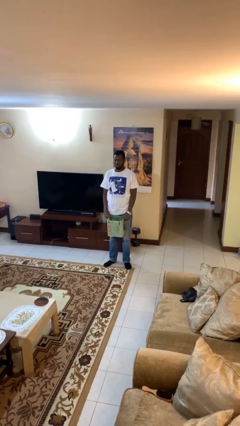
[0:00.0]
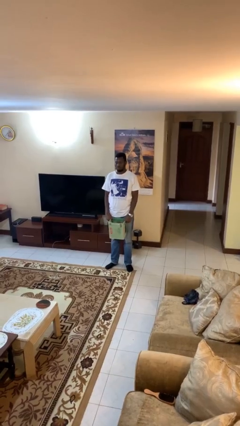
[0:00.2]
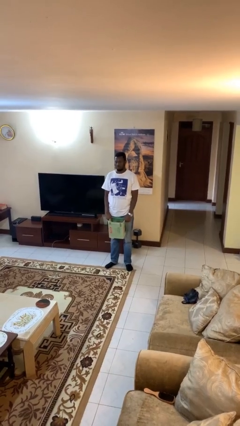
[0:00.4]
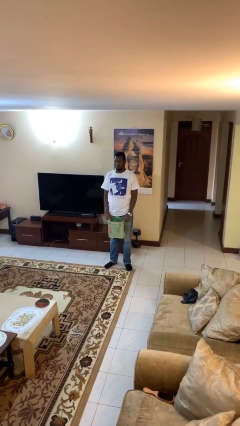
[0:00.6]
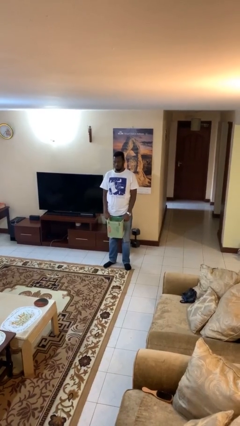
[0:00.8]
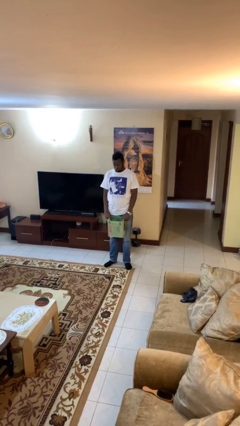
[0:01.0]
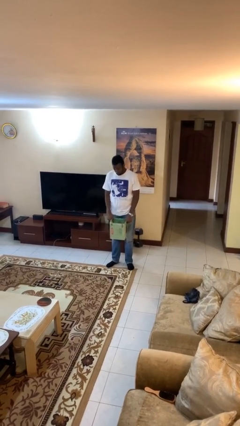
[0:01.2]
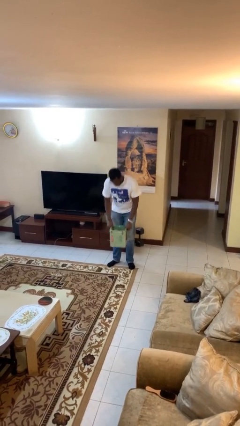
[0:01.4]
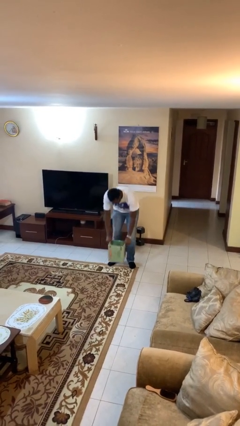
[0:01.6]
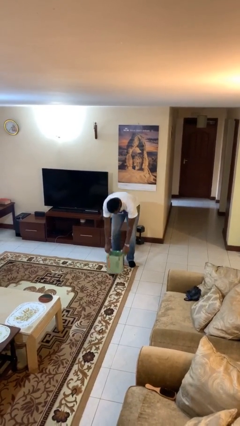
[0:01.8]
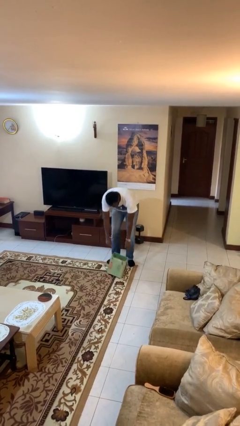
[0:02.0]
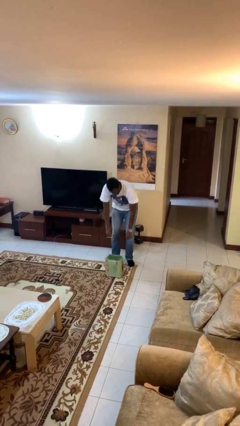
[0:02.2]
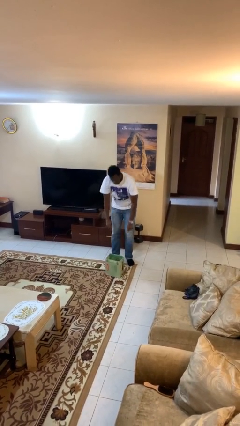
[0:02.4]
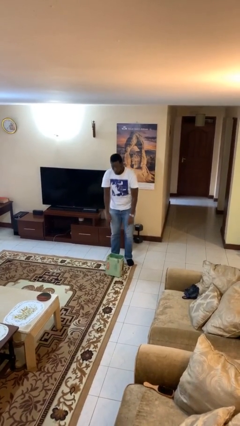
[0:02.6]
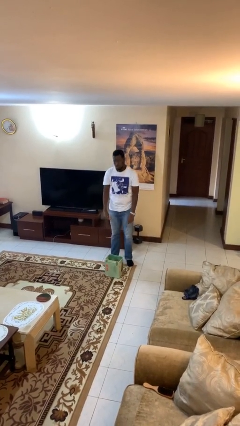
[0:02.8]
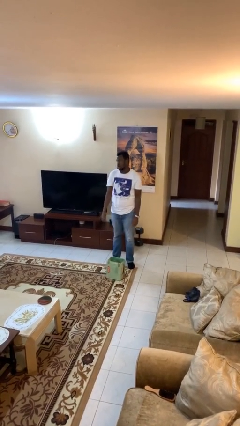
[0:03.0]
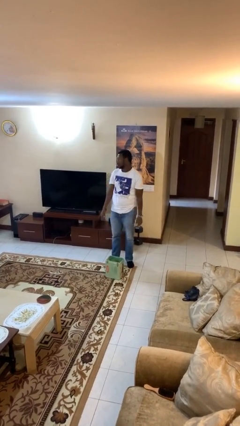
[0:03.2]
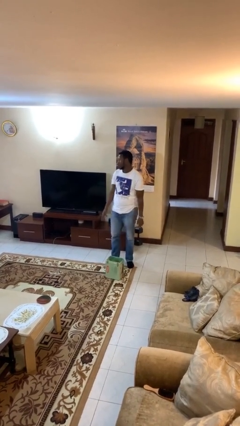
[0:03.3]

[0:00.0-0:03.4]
person puts down object on floor

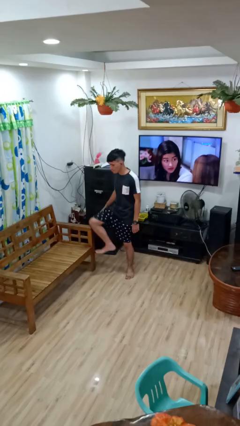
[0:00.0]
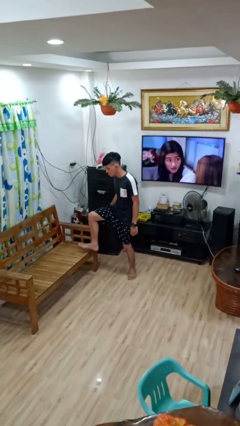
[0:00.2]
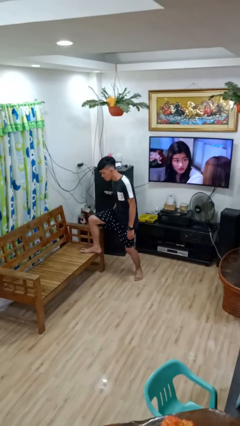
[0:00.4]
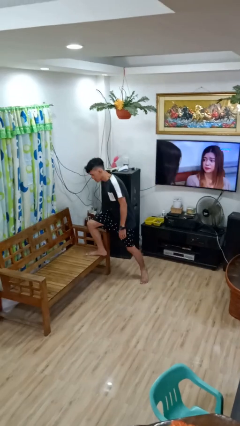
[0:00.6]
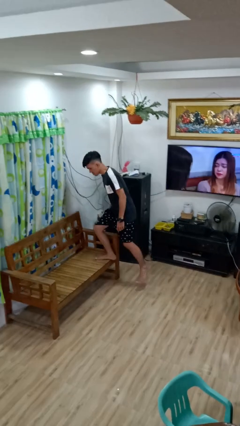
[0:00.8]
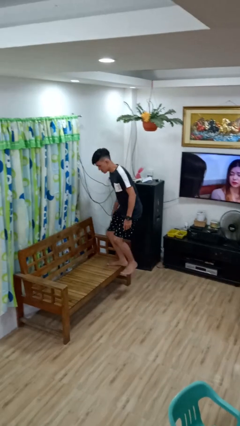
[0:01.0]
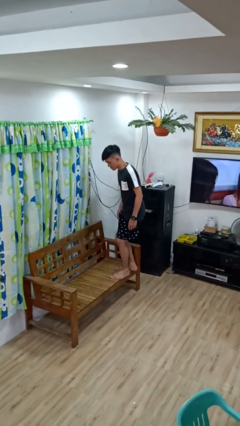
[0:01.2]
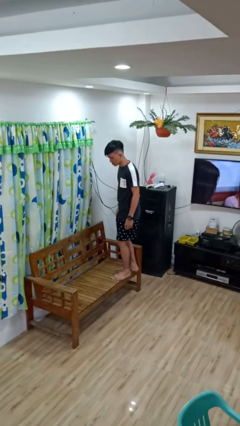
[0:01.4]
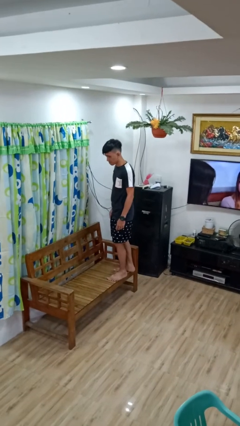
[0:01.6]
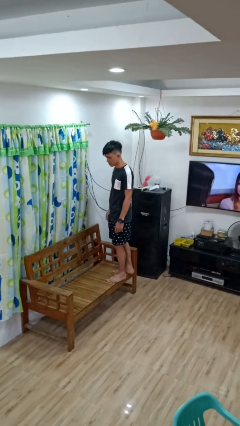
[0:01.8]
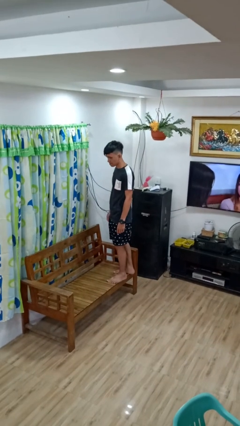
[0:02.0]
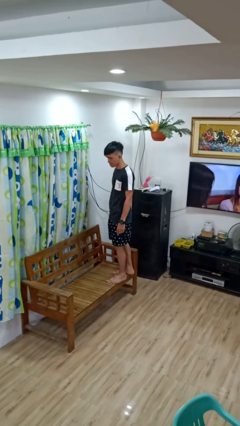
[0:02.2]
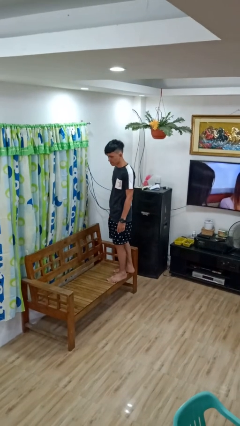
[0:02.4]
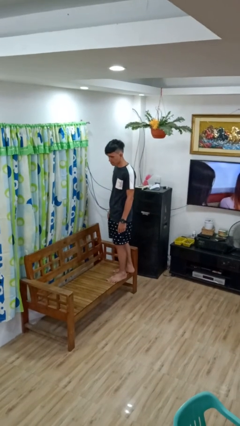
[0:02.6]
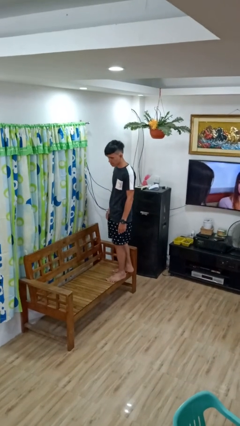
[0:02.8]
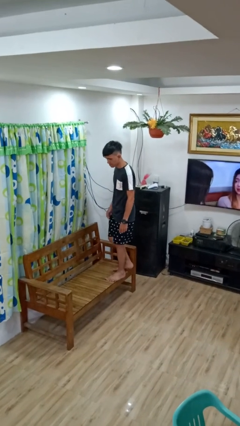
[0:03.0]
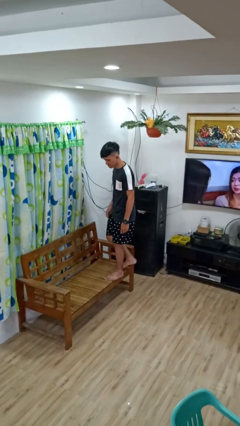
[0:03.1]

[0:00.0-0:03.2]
person climbs on couch

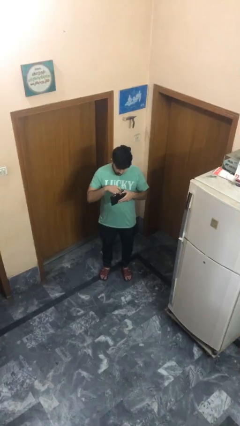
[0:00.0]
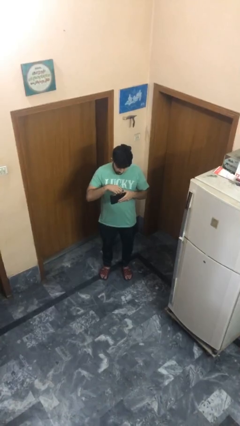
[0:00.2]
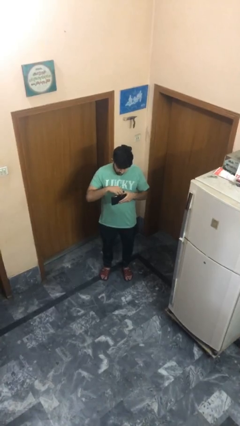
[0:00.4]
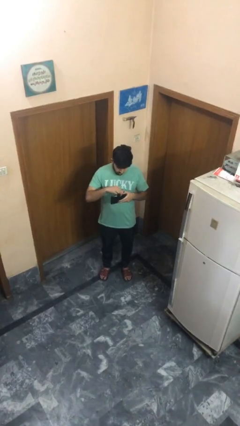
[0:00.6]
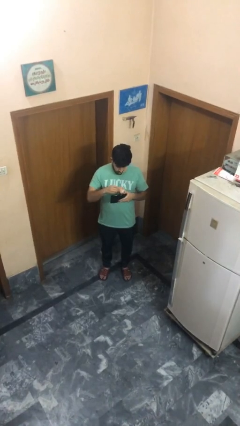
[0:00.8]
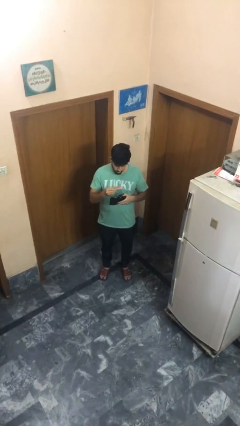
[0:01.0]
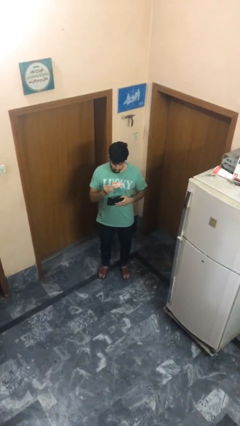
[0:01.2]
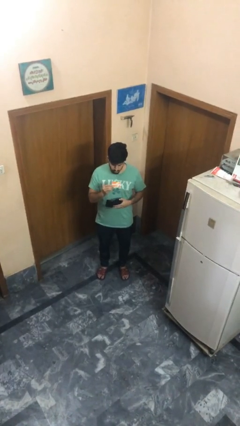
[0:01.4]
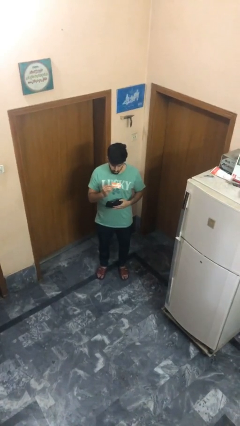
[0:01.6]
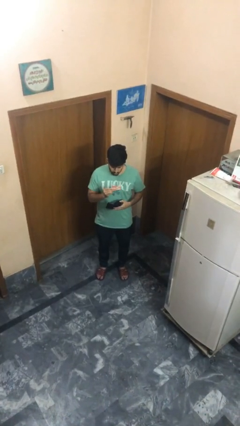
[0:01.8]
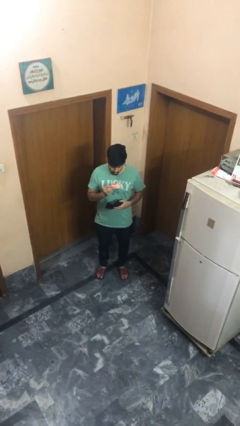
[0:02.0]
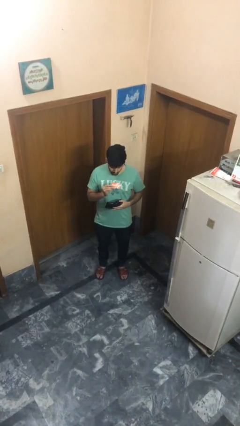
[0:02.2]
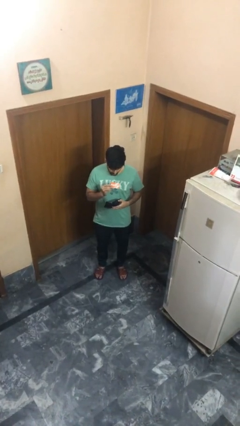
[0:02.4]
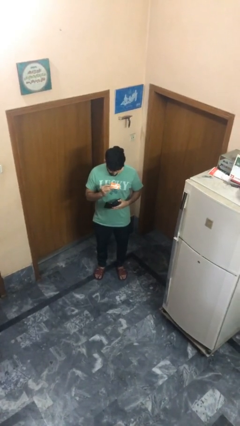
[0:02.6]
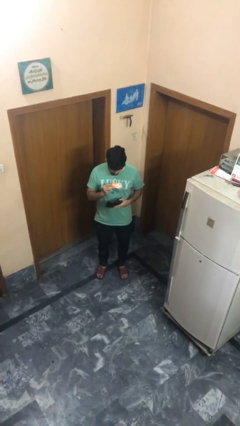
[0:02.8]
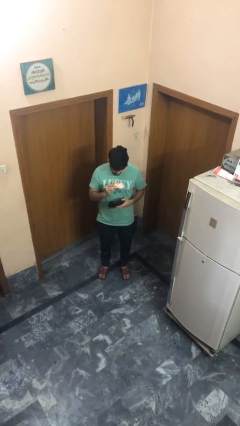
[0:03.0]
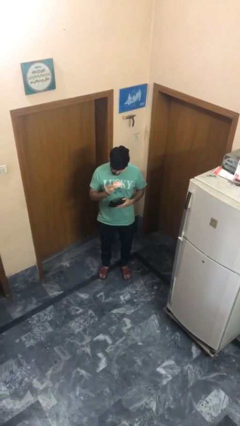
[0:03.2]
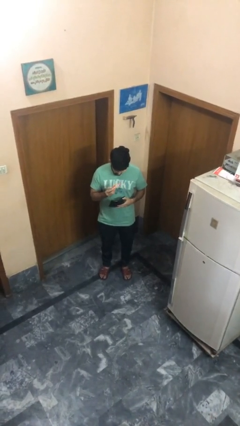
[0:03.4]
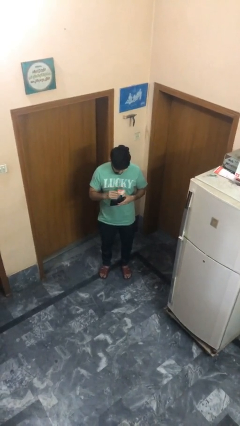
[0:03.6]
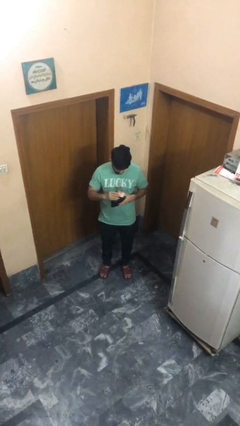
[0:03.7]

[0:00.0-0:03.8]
person takes object from purse

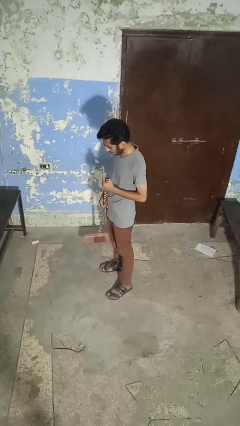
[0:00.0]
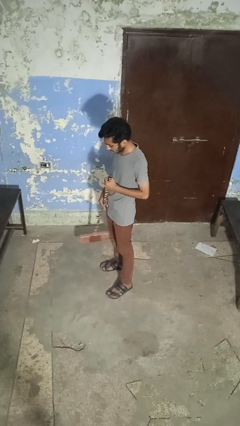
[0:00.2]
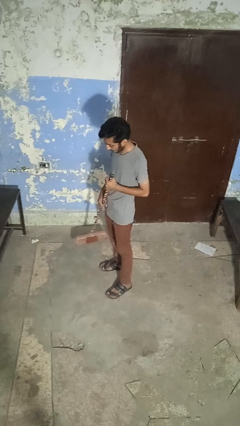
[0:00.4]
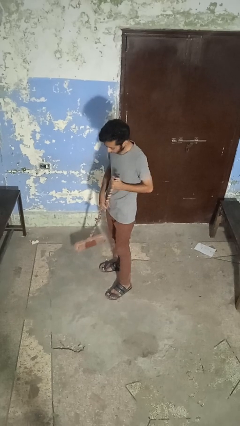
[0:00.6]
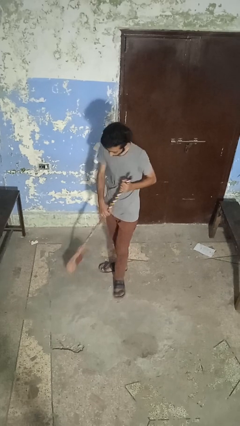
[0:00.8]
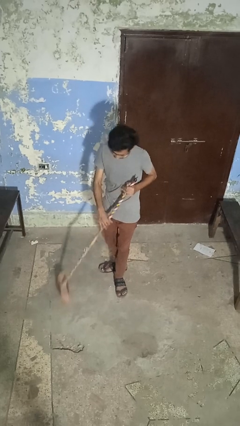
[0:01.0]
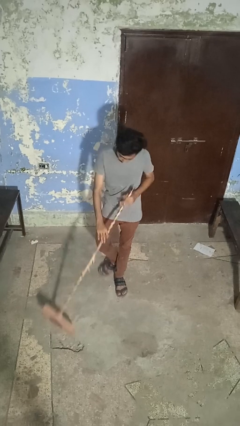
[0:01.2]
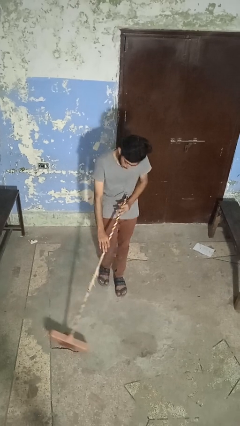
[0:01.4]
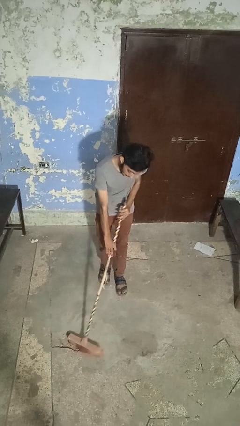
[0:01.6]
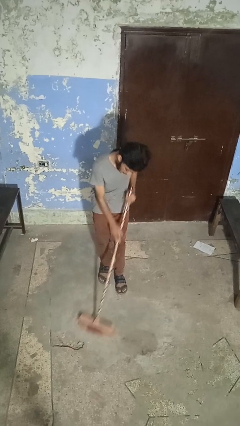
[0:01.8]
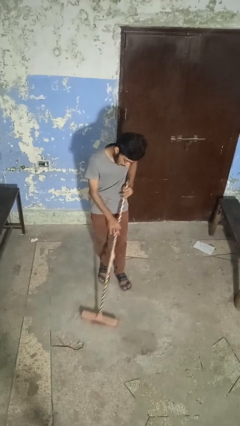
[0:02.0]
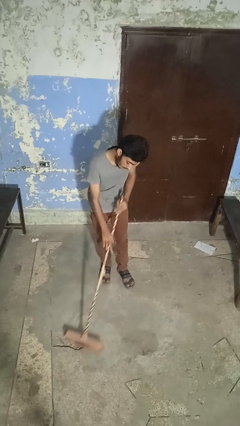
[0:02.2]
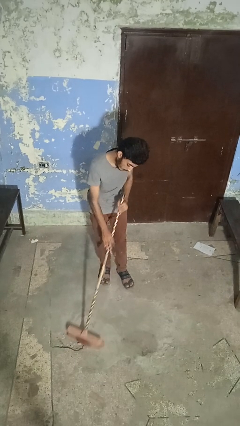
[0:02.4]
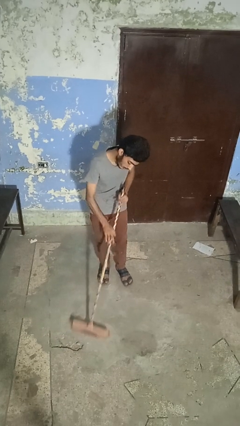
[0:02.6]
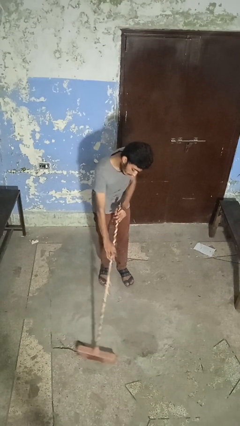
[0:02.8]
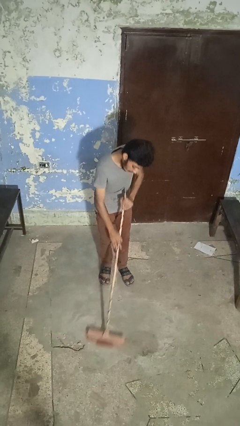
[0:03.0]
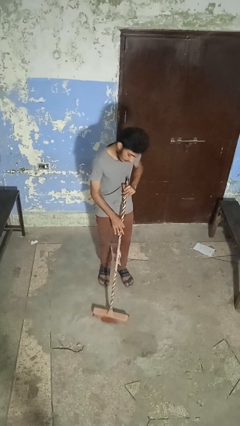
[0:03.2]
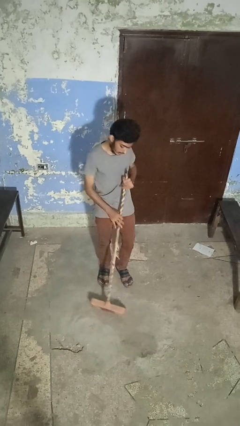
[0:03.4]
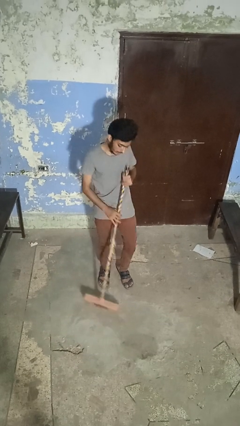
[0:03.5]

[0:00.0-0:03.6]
person sweeps floor

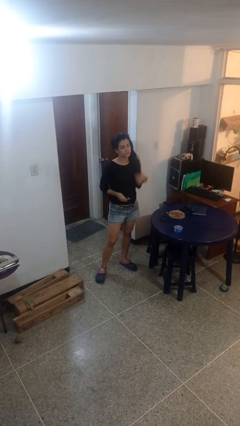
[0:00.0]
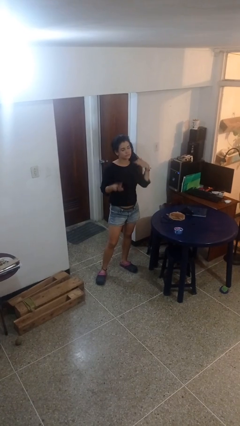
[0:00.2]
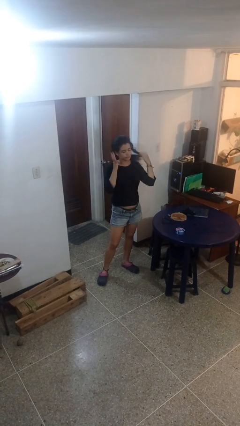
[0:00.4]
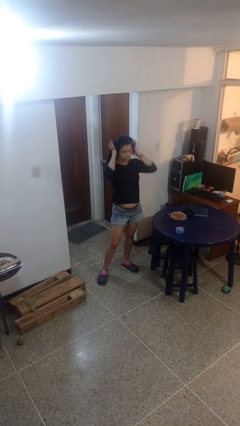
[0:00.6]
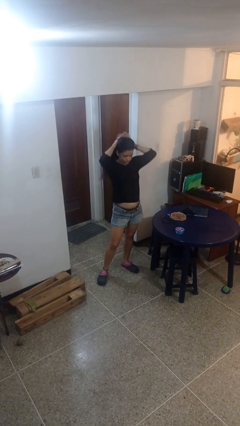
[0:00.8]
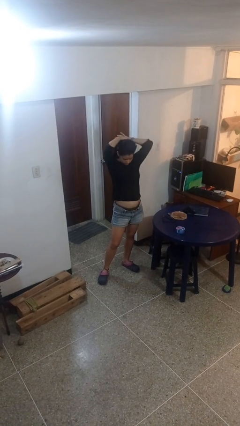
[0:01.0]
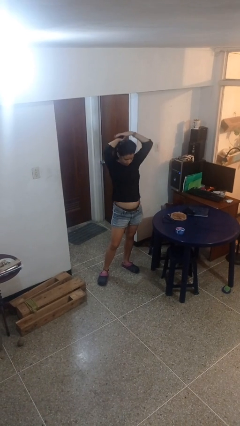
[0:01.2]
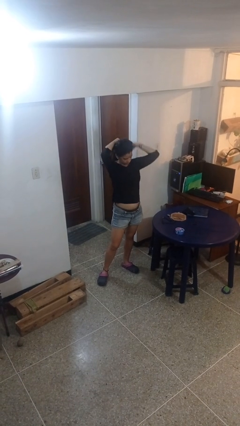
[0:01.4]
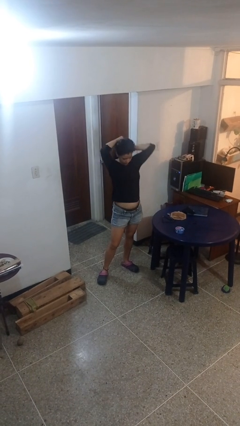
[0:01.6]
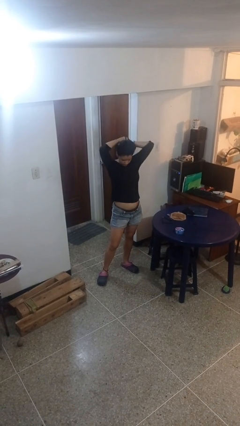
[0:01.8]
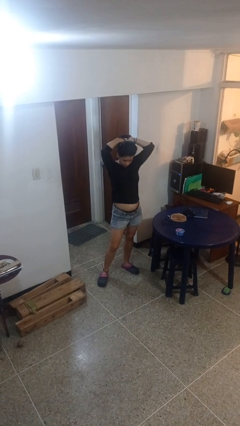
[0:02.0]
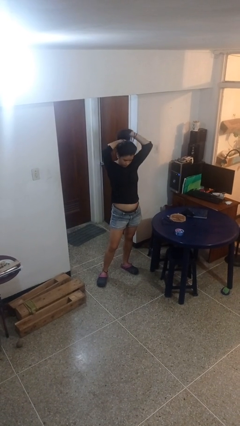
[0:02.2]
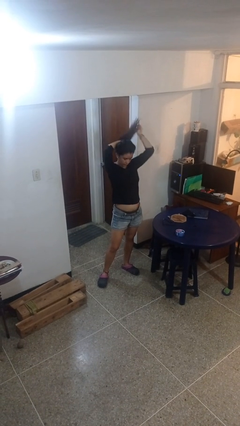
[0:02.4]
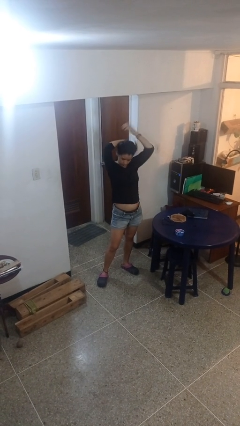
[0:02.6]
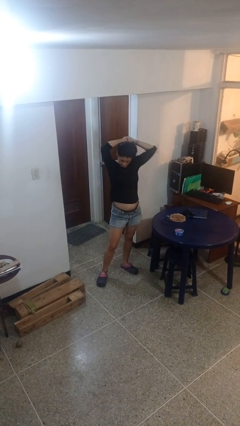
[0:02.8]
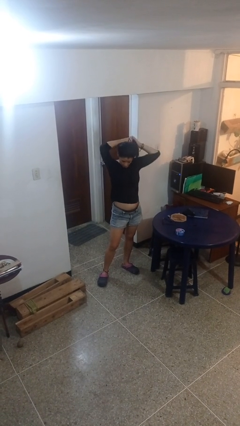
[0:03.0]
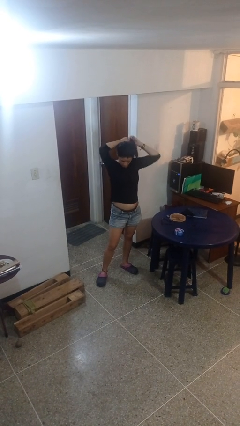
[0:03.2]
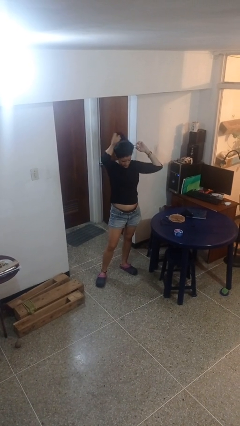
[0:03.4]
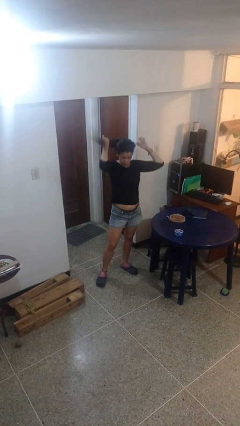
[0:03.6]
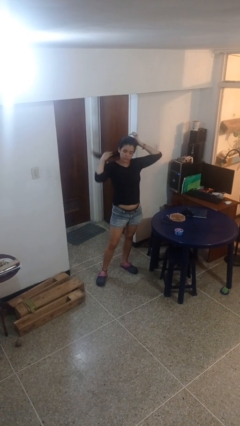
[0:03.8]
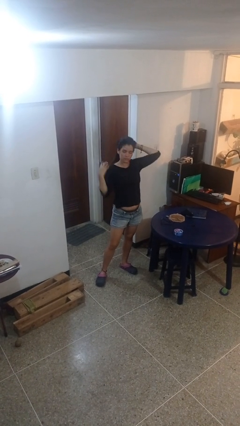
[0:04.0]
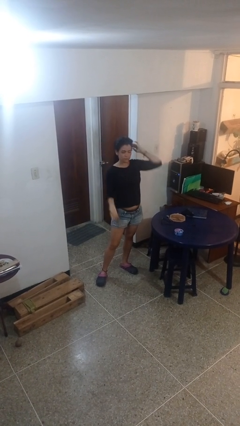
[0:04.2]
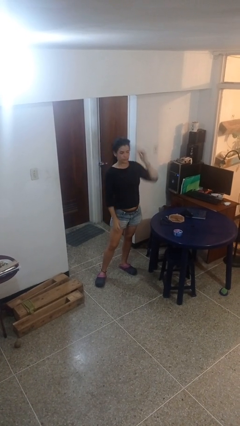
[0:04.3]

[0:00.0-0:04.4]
person puts hair in ponytail
